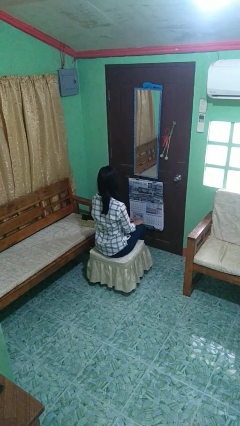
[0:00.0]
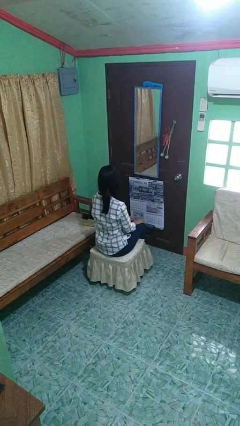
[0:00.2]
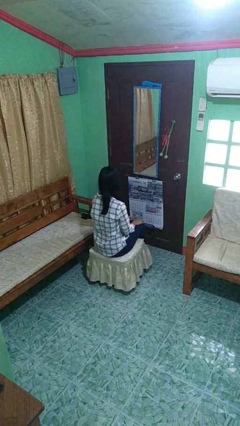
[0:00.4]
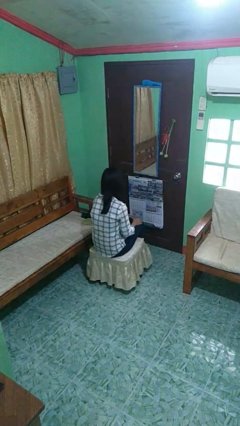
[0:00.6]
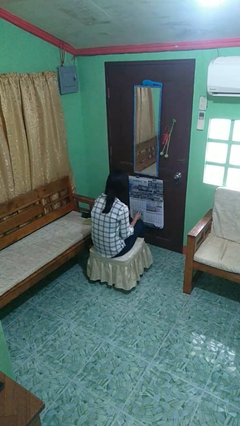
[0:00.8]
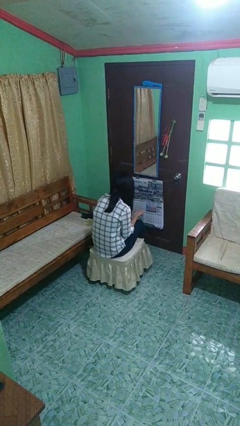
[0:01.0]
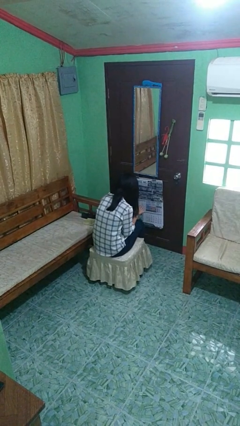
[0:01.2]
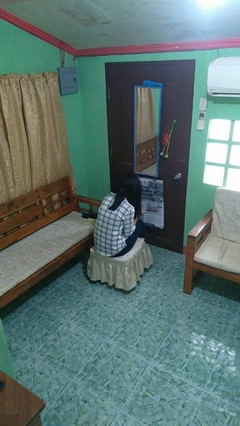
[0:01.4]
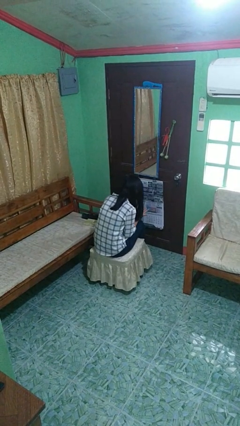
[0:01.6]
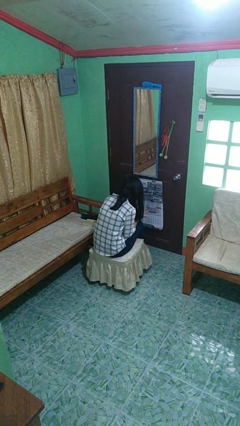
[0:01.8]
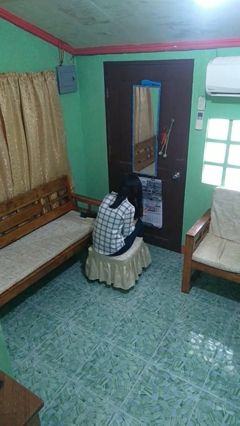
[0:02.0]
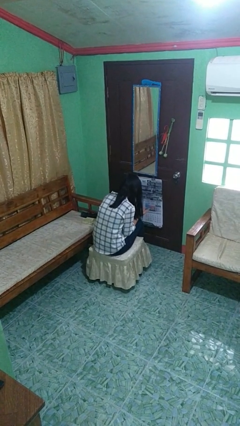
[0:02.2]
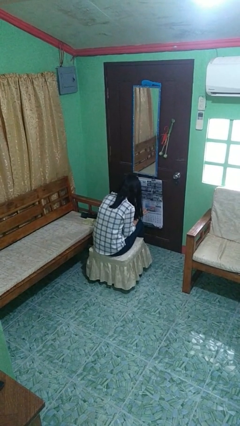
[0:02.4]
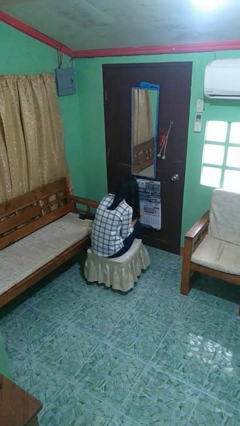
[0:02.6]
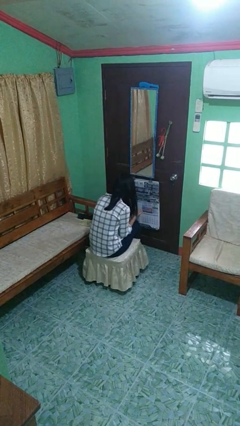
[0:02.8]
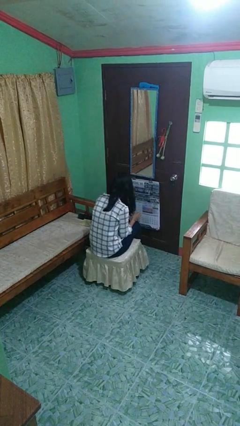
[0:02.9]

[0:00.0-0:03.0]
person looks at hands in lap

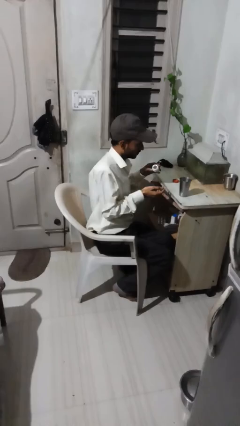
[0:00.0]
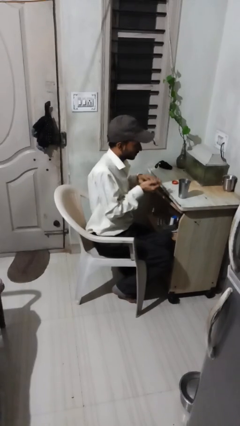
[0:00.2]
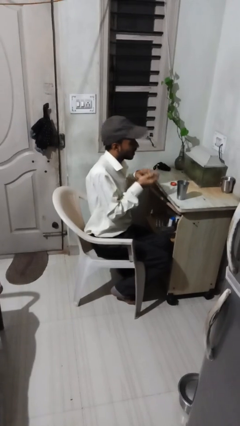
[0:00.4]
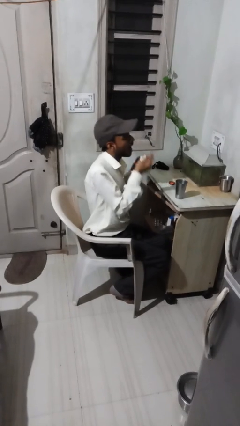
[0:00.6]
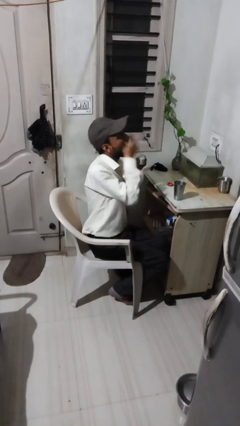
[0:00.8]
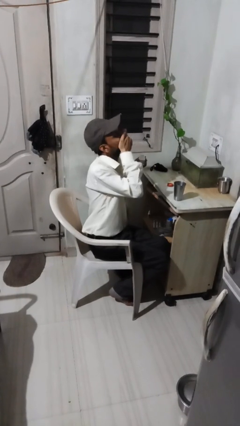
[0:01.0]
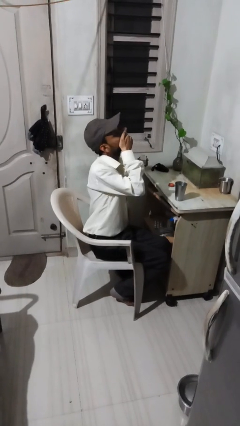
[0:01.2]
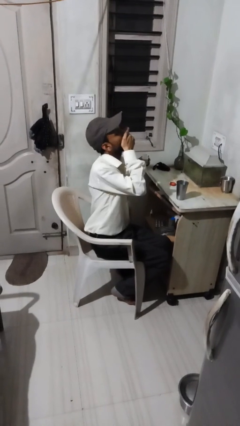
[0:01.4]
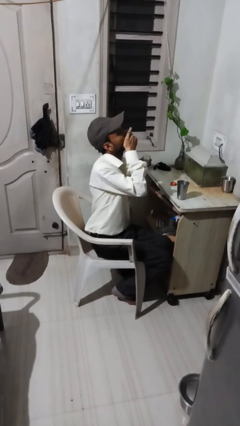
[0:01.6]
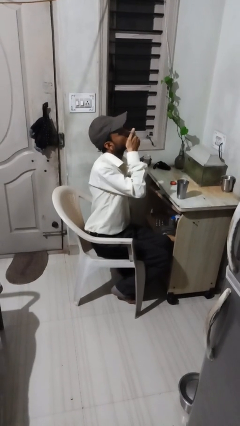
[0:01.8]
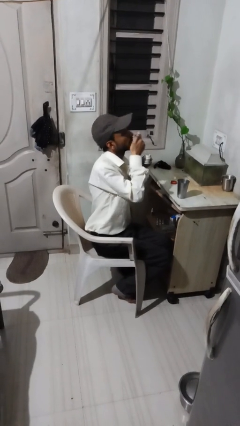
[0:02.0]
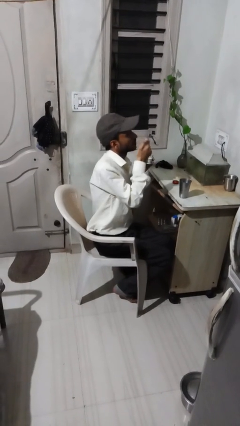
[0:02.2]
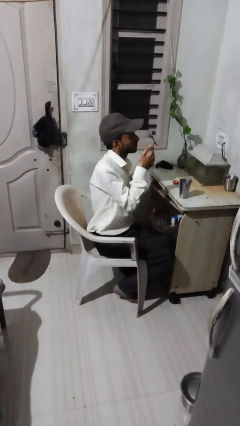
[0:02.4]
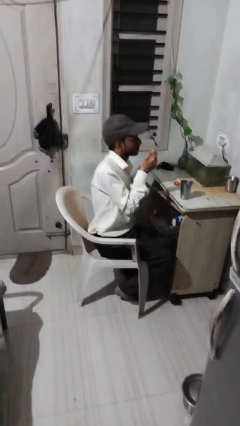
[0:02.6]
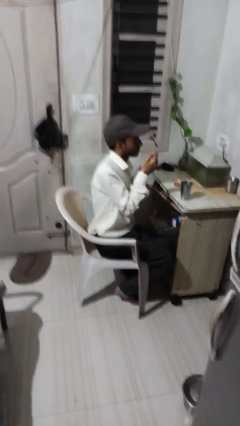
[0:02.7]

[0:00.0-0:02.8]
person takes medicine pills

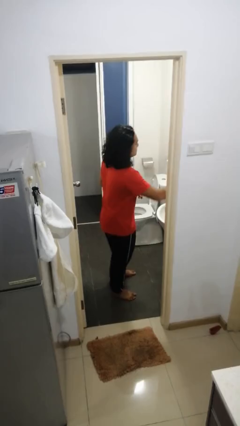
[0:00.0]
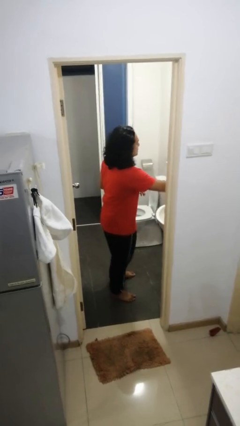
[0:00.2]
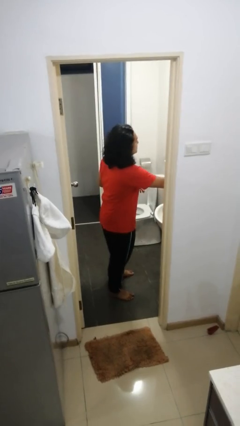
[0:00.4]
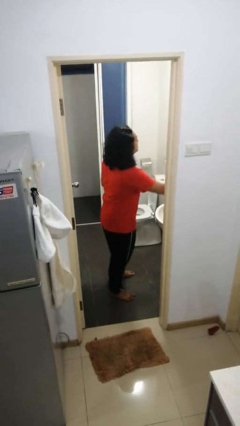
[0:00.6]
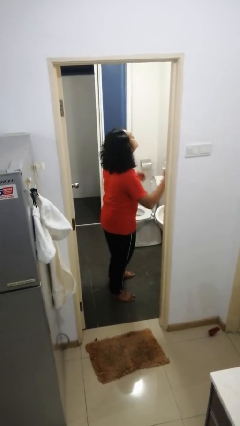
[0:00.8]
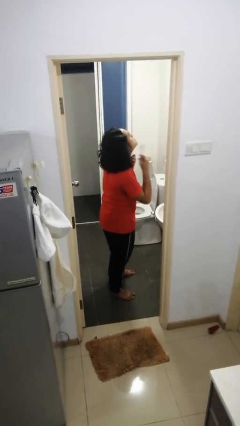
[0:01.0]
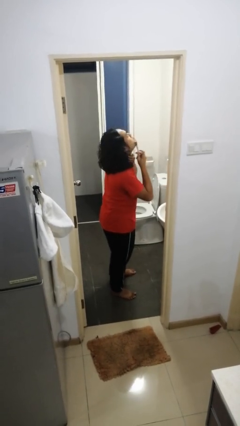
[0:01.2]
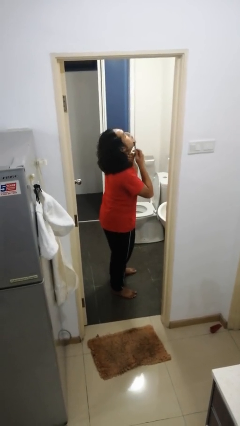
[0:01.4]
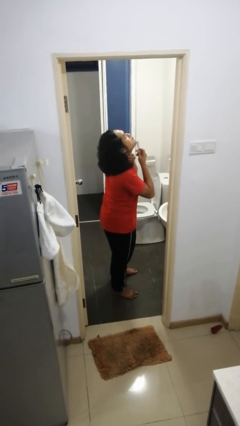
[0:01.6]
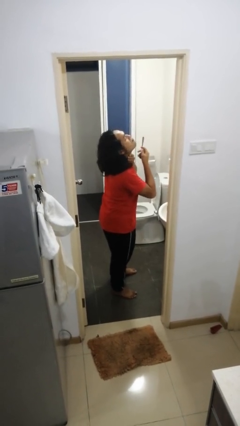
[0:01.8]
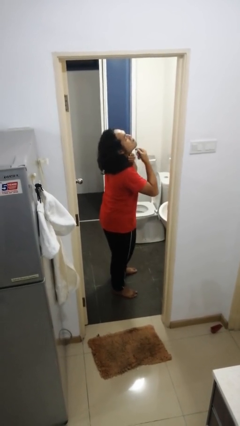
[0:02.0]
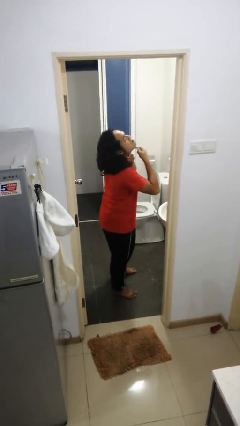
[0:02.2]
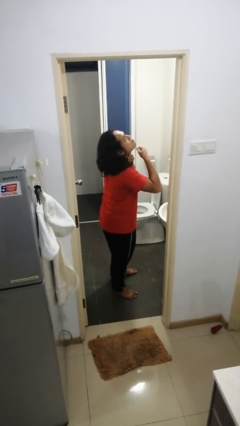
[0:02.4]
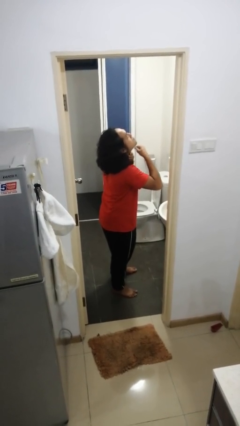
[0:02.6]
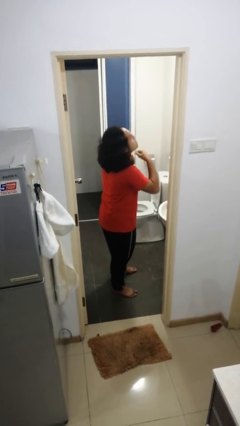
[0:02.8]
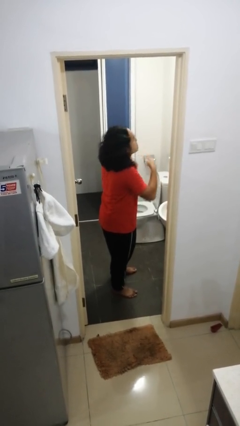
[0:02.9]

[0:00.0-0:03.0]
person shaves face

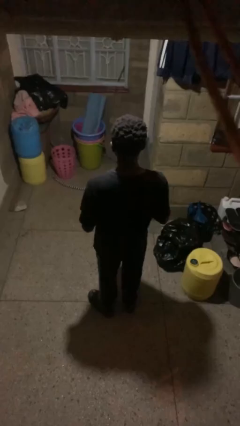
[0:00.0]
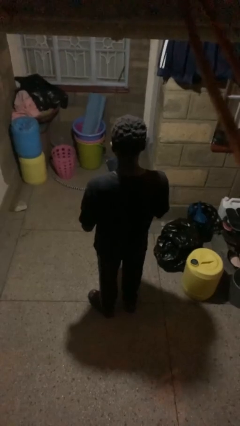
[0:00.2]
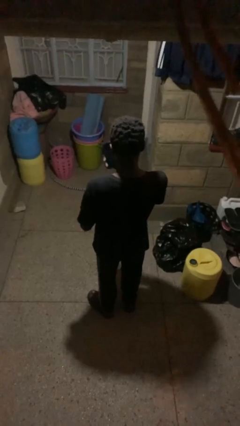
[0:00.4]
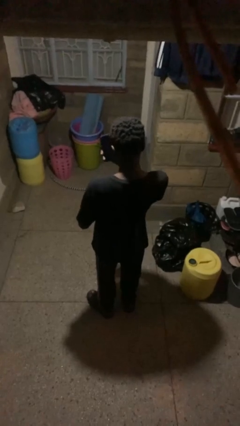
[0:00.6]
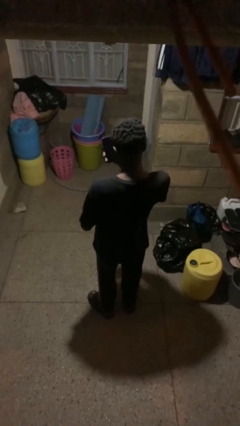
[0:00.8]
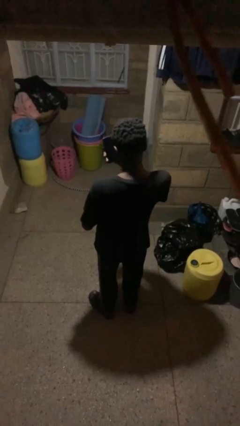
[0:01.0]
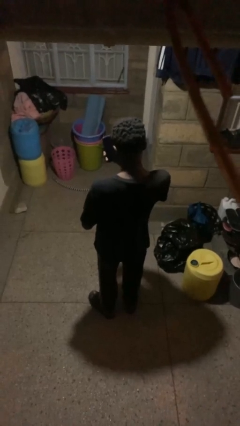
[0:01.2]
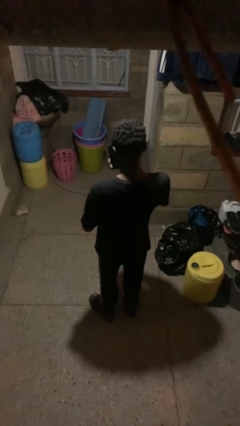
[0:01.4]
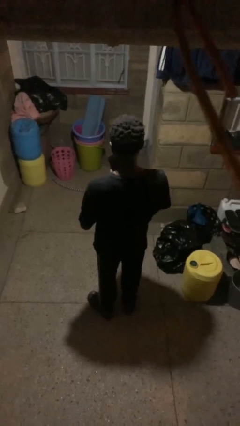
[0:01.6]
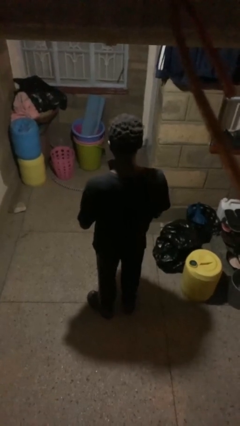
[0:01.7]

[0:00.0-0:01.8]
person takes selfie

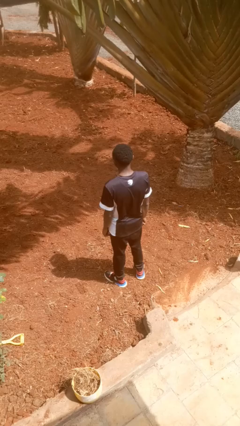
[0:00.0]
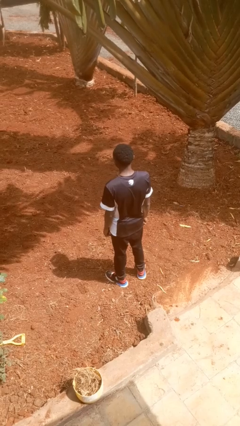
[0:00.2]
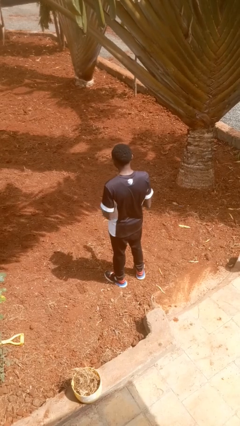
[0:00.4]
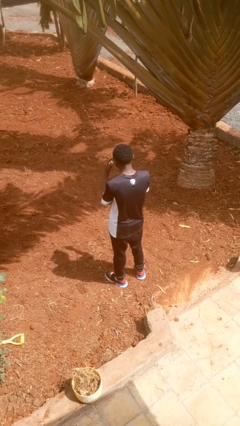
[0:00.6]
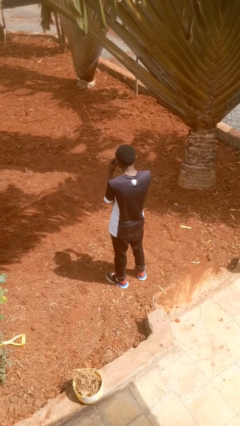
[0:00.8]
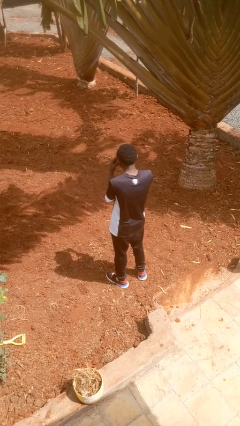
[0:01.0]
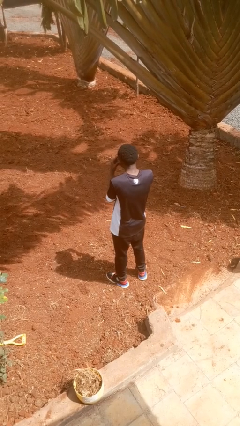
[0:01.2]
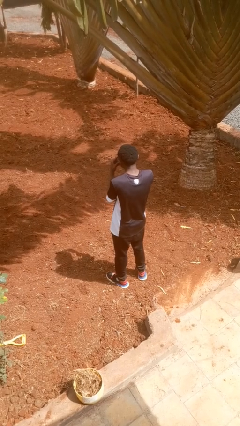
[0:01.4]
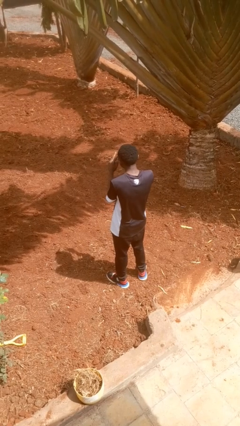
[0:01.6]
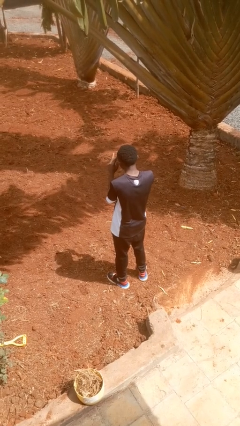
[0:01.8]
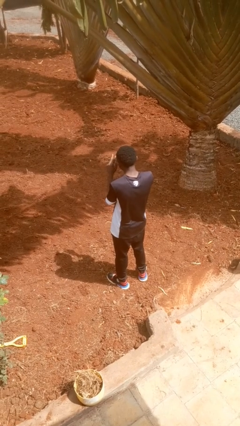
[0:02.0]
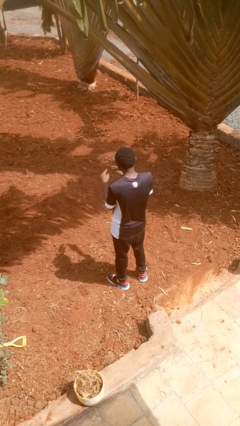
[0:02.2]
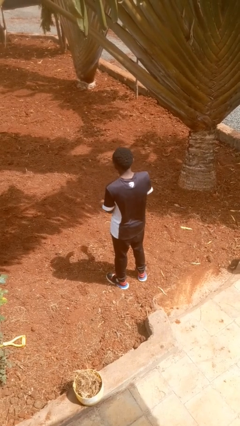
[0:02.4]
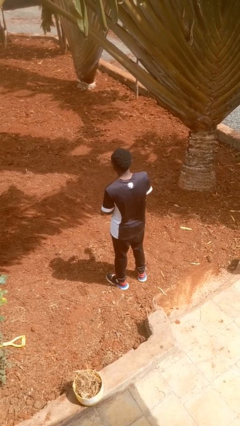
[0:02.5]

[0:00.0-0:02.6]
person gestures watch closely

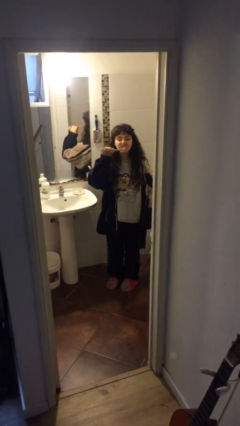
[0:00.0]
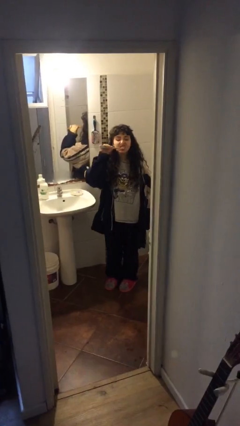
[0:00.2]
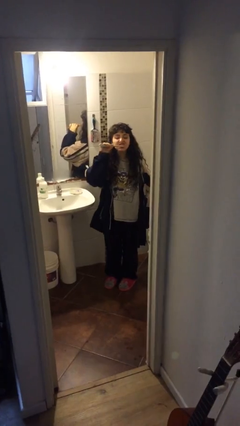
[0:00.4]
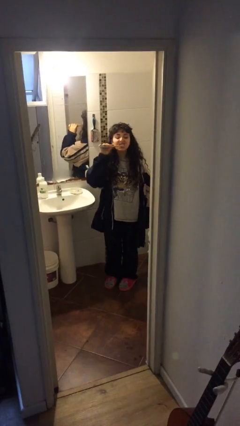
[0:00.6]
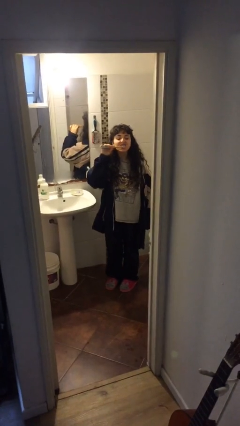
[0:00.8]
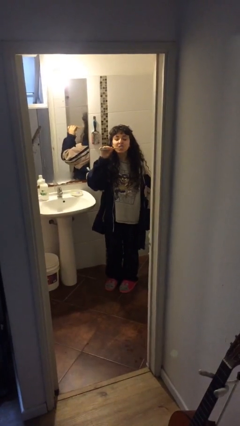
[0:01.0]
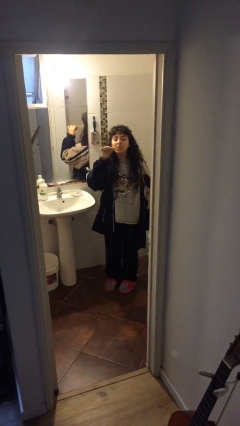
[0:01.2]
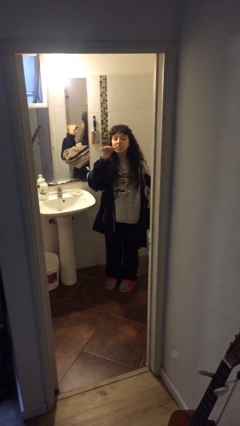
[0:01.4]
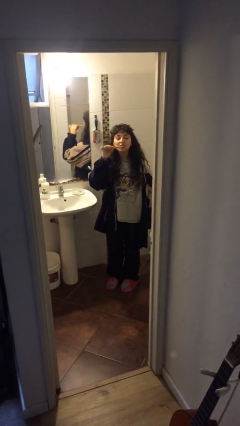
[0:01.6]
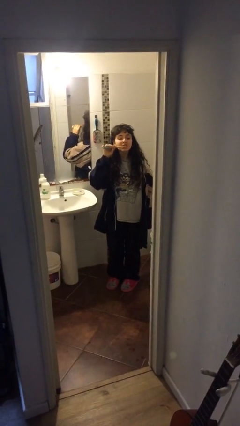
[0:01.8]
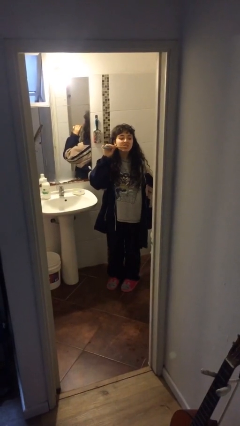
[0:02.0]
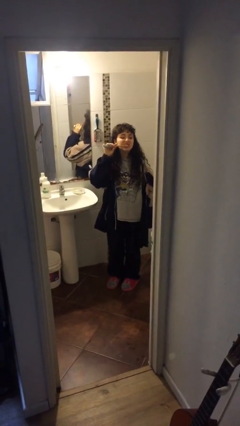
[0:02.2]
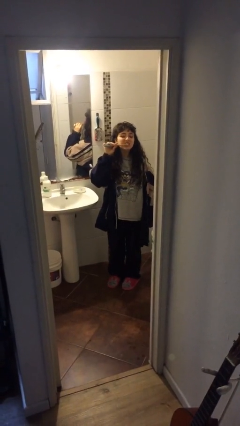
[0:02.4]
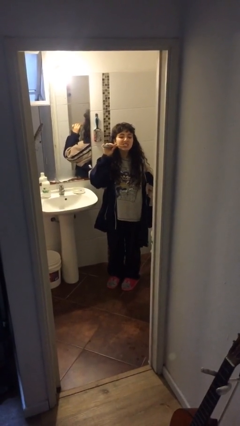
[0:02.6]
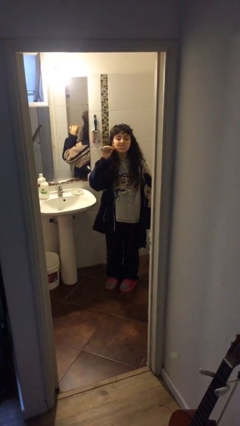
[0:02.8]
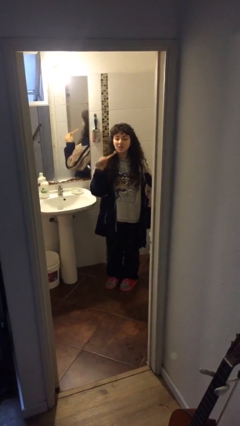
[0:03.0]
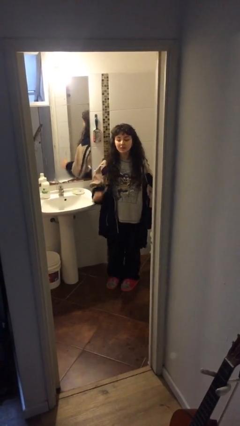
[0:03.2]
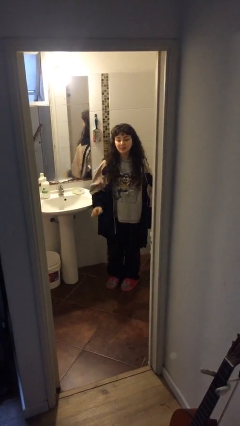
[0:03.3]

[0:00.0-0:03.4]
person brushes teeth

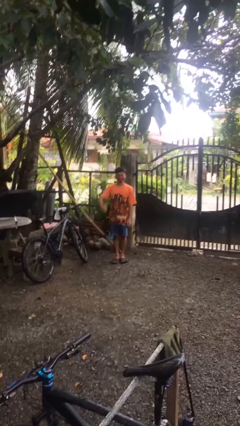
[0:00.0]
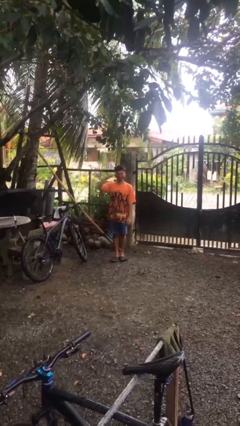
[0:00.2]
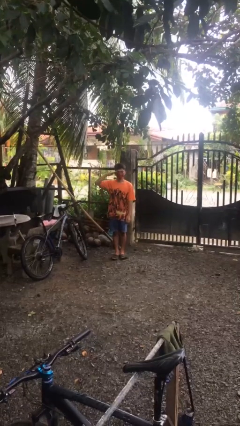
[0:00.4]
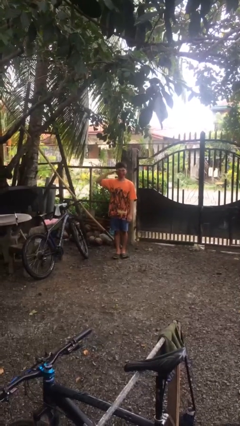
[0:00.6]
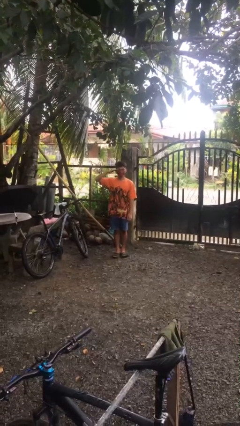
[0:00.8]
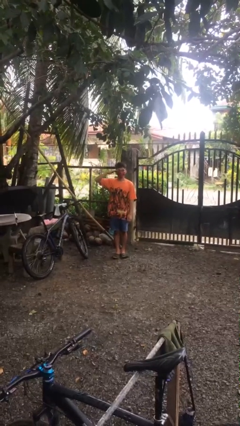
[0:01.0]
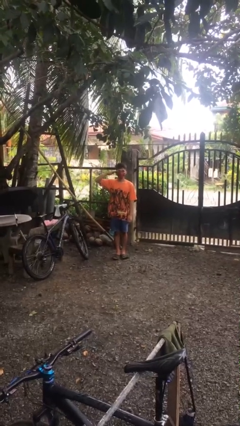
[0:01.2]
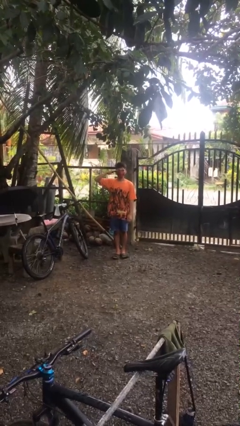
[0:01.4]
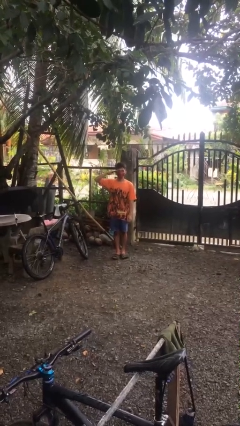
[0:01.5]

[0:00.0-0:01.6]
person salutes
